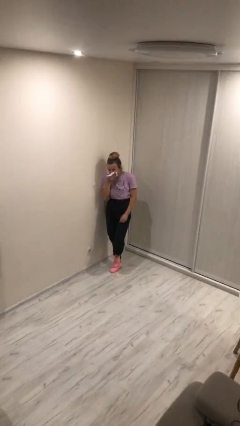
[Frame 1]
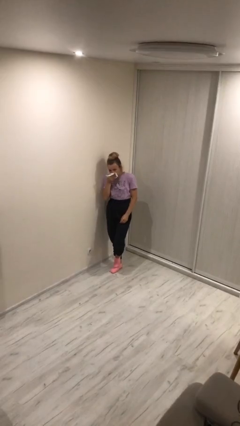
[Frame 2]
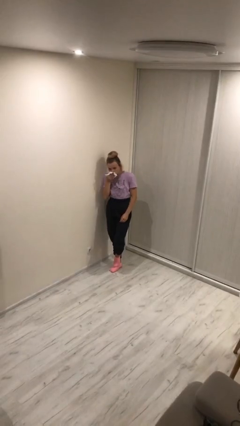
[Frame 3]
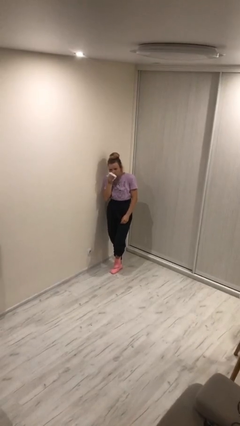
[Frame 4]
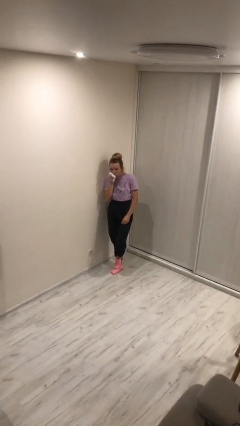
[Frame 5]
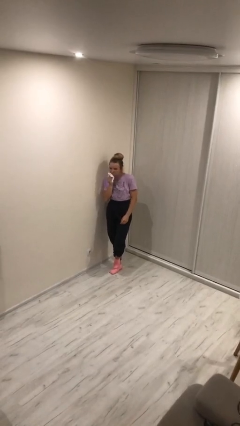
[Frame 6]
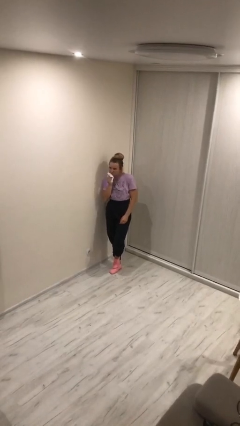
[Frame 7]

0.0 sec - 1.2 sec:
person wipes mouth with napkin

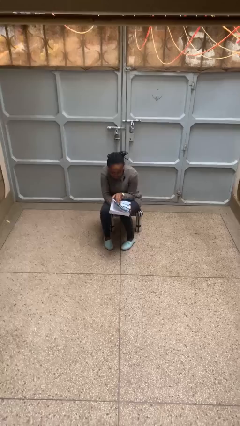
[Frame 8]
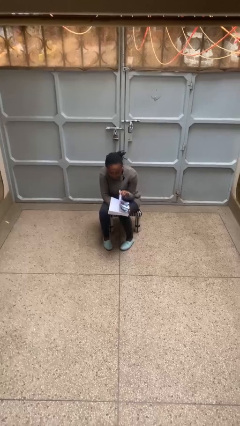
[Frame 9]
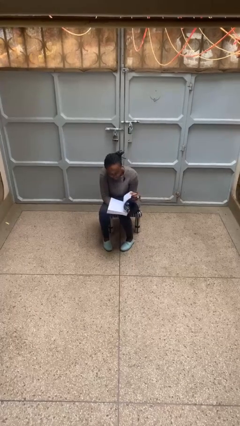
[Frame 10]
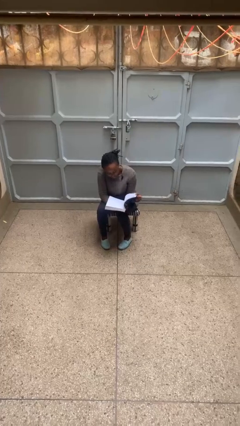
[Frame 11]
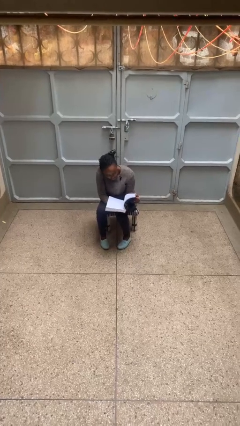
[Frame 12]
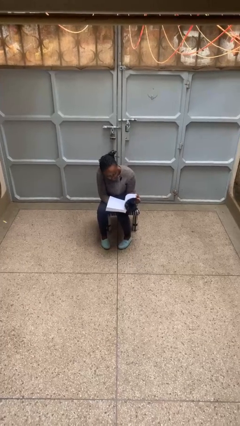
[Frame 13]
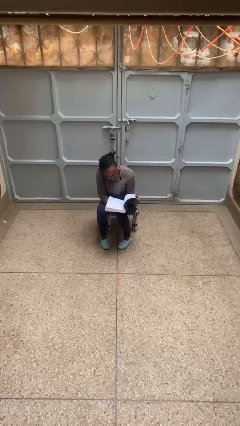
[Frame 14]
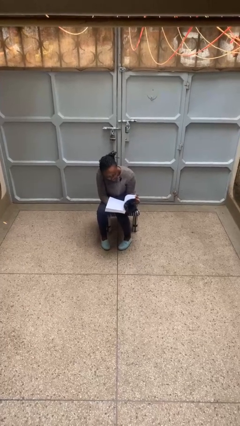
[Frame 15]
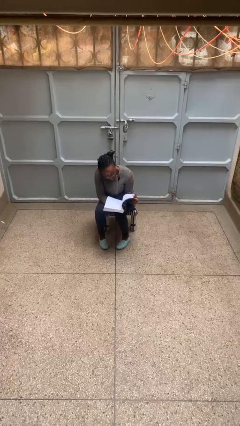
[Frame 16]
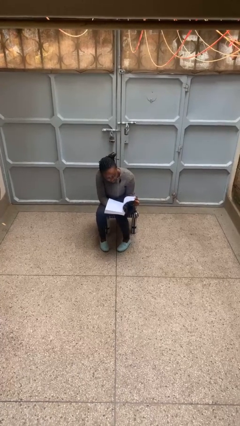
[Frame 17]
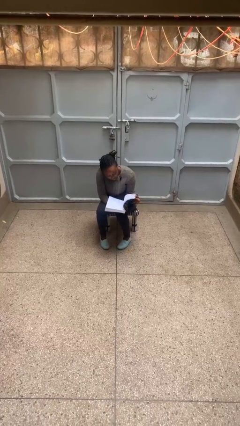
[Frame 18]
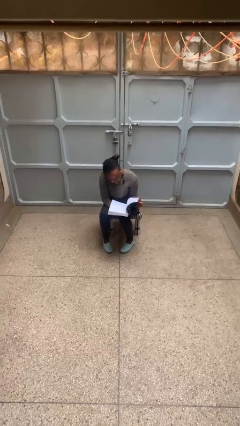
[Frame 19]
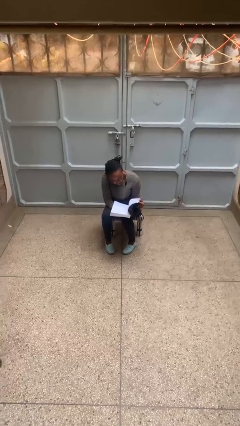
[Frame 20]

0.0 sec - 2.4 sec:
person reads book

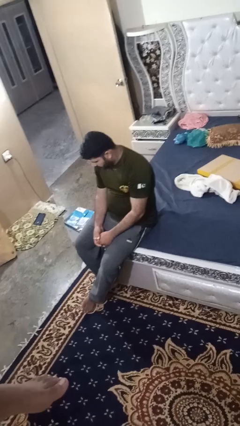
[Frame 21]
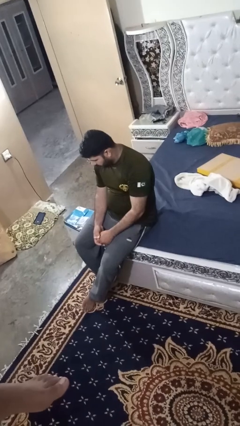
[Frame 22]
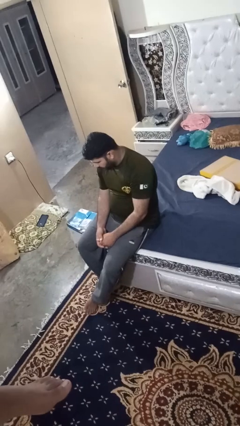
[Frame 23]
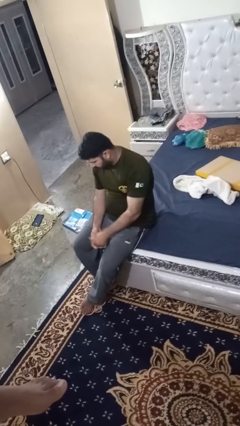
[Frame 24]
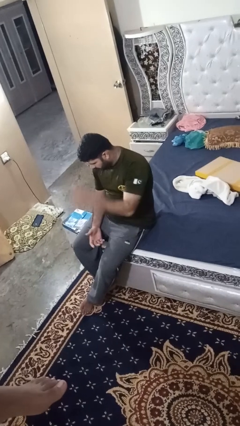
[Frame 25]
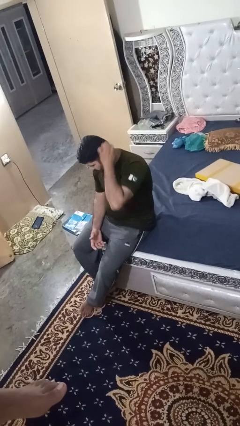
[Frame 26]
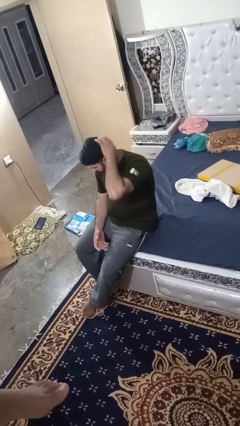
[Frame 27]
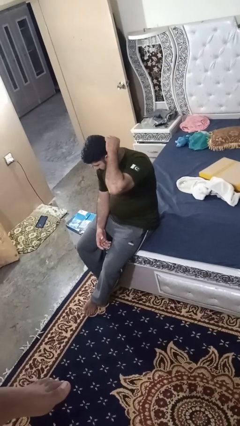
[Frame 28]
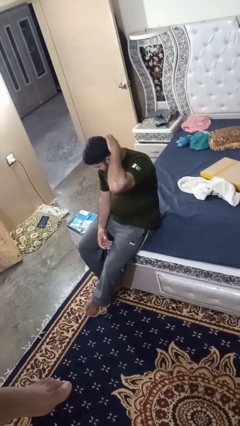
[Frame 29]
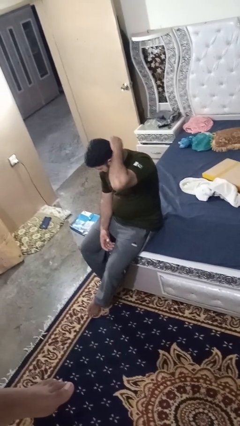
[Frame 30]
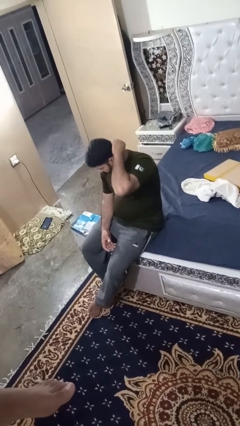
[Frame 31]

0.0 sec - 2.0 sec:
person strokes hair

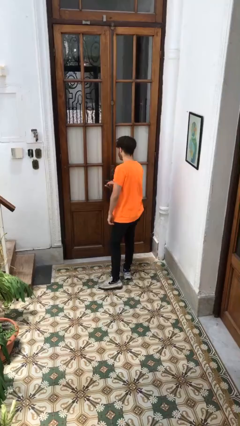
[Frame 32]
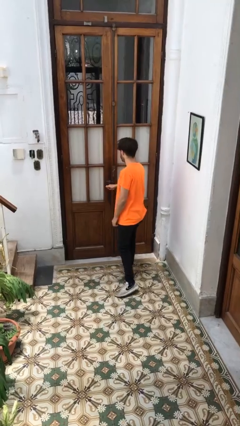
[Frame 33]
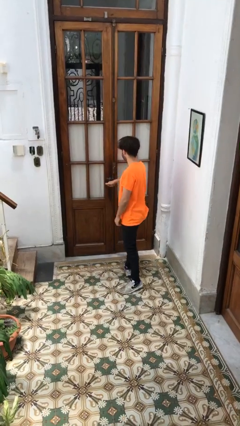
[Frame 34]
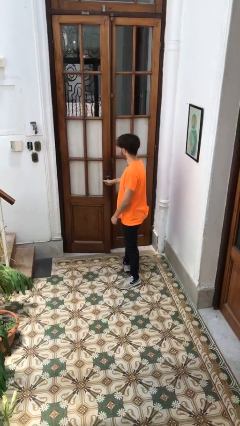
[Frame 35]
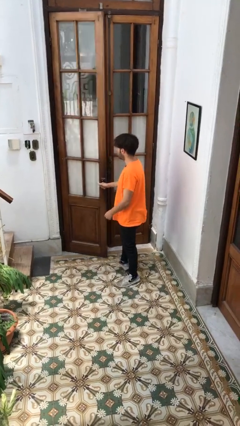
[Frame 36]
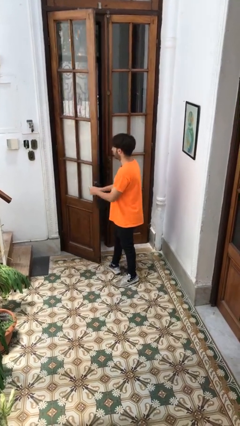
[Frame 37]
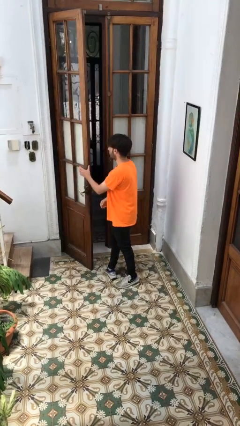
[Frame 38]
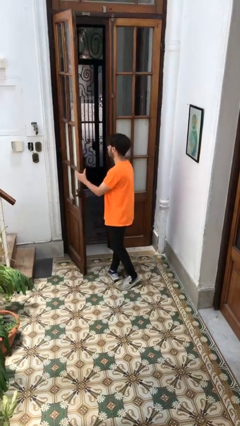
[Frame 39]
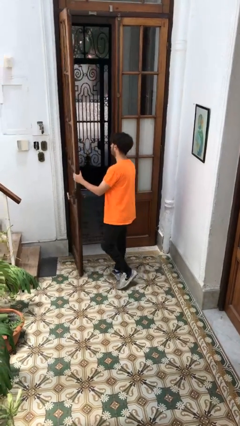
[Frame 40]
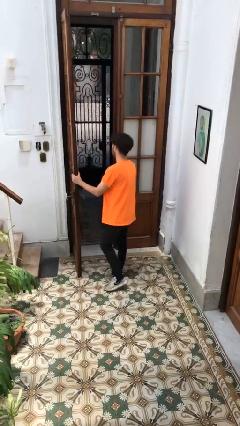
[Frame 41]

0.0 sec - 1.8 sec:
person opens facility door

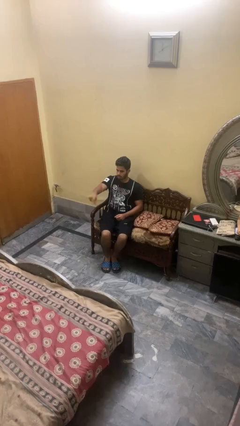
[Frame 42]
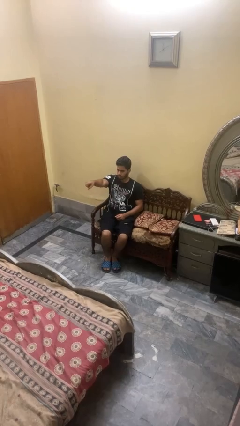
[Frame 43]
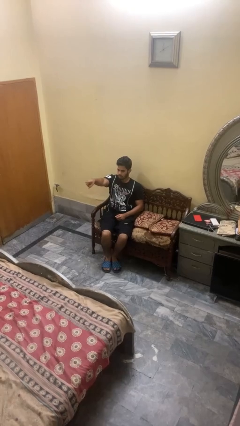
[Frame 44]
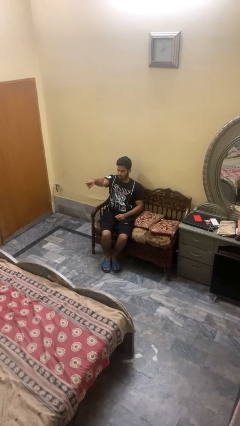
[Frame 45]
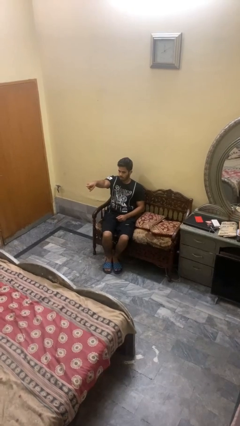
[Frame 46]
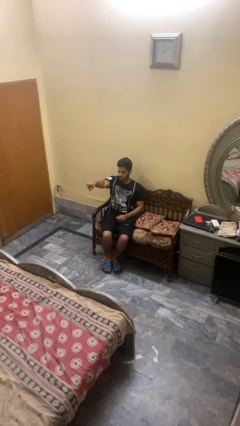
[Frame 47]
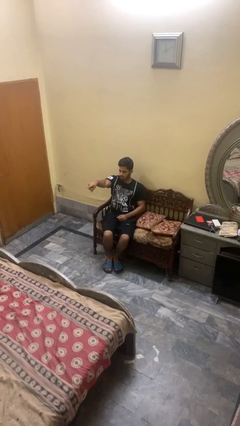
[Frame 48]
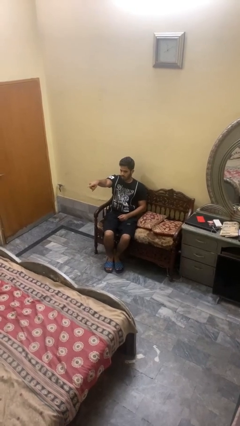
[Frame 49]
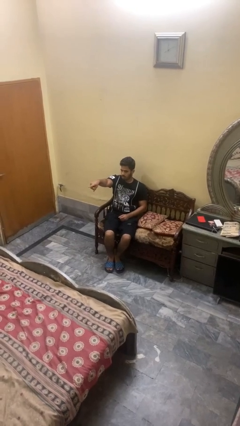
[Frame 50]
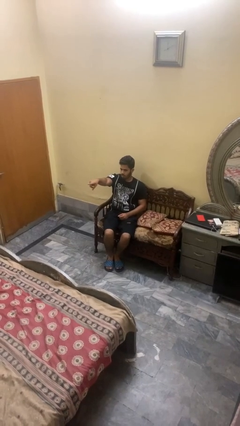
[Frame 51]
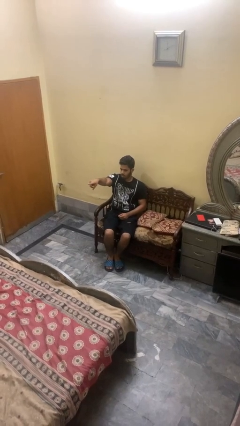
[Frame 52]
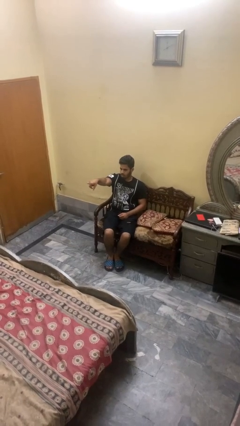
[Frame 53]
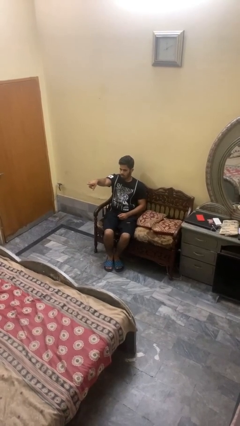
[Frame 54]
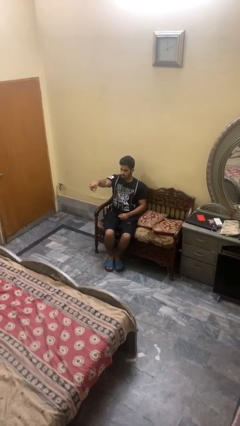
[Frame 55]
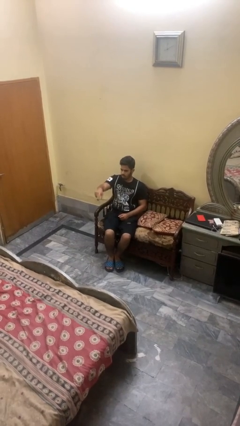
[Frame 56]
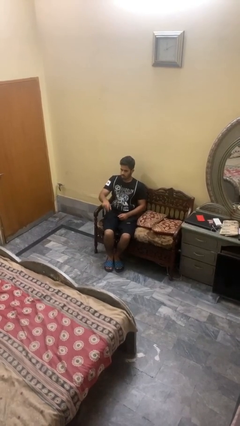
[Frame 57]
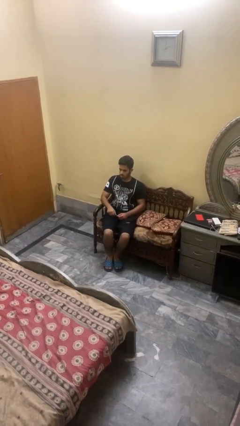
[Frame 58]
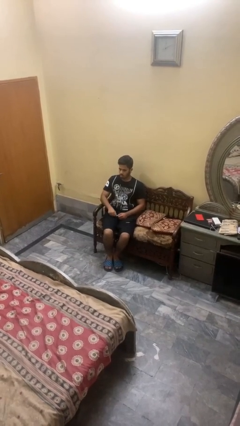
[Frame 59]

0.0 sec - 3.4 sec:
person points at person

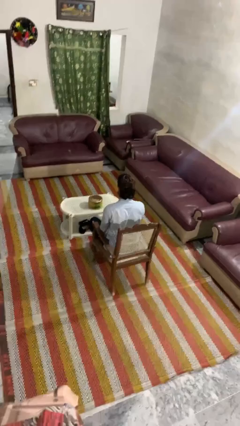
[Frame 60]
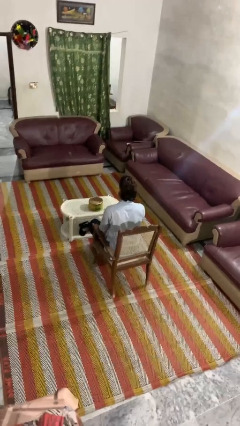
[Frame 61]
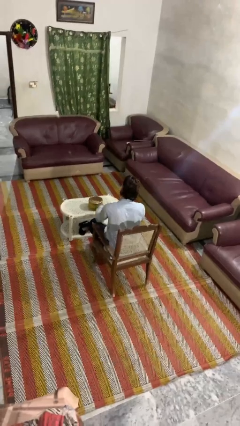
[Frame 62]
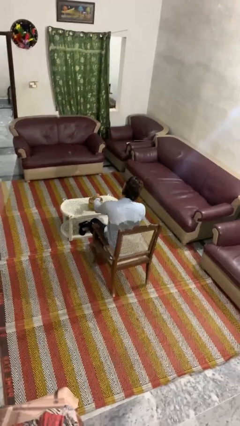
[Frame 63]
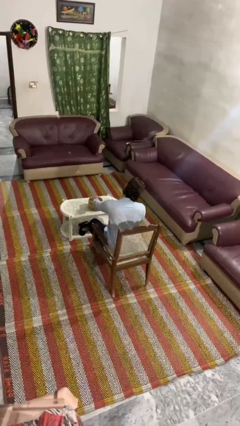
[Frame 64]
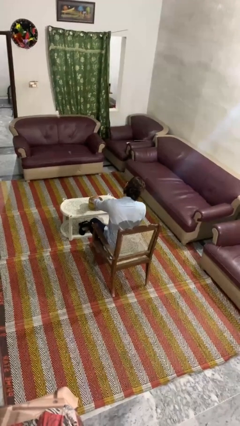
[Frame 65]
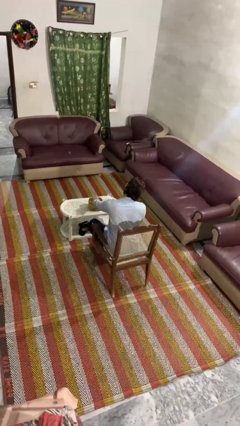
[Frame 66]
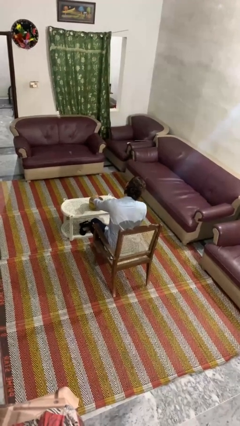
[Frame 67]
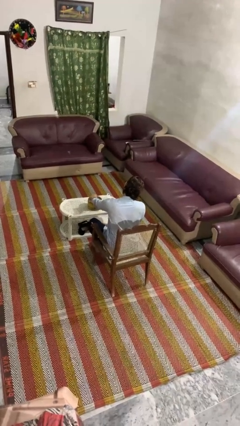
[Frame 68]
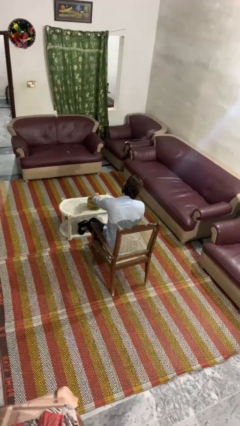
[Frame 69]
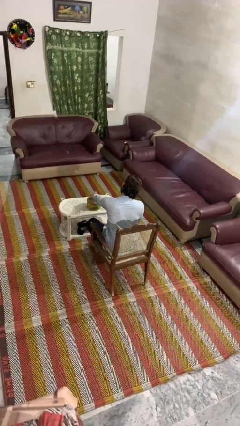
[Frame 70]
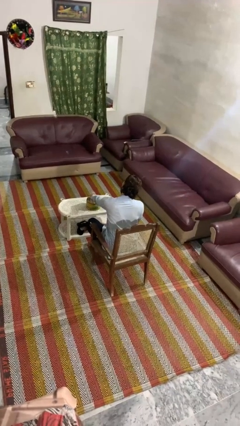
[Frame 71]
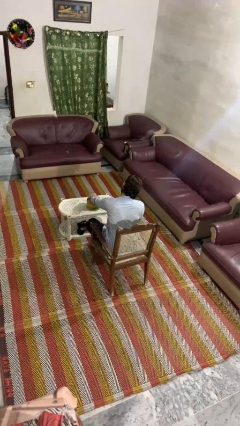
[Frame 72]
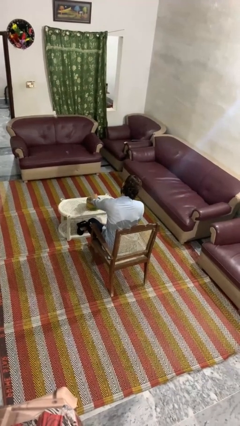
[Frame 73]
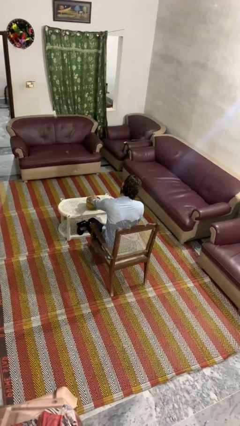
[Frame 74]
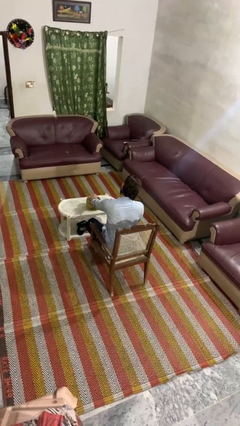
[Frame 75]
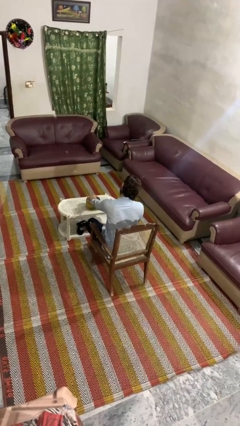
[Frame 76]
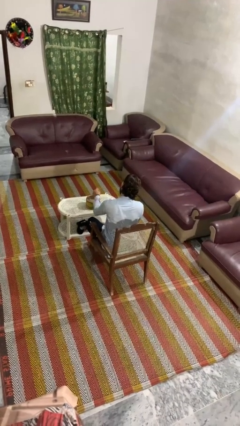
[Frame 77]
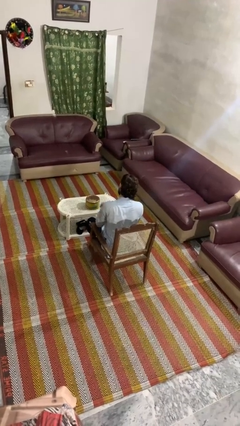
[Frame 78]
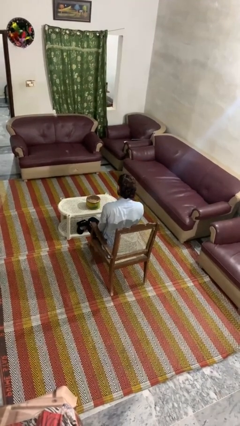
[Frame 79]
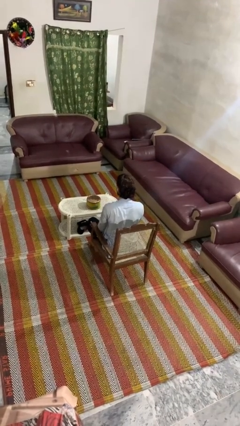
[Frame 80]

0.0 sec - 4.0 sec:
person taps object with finger

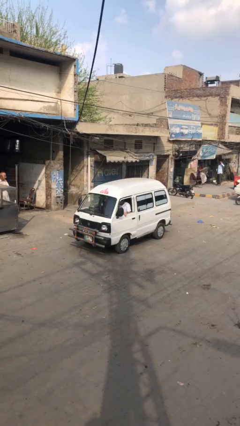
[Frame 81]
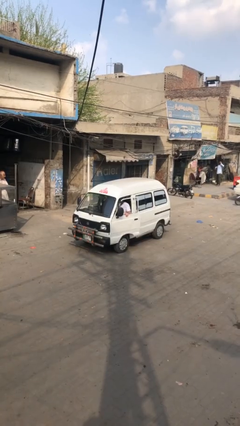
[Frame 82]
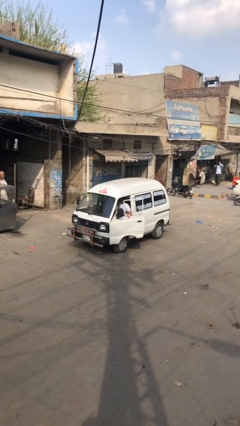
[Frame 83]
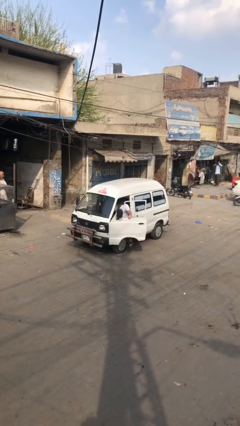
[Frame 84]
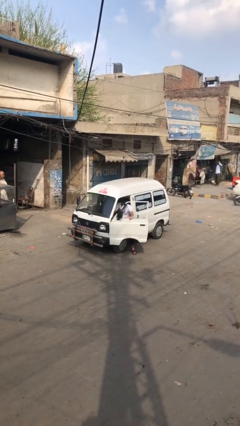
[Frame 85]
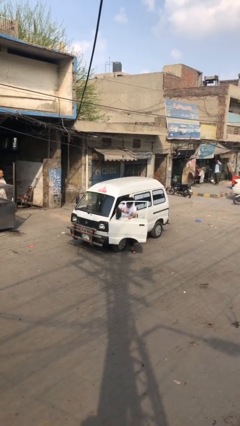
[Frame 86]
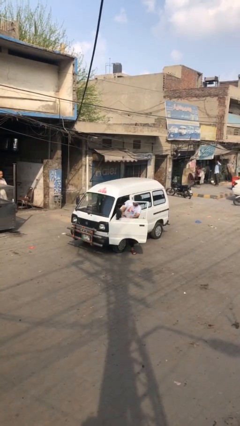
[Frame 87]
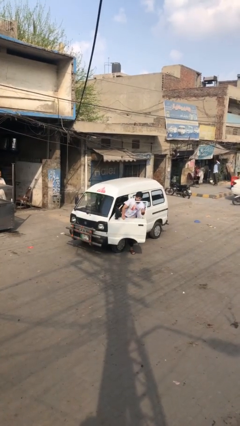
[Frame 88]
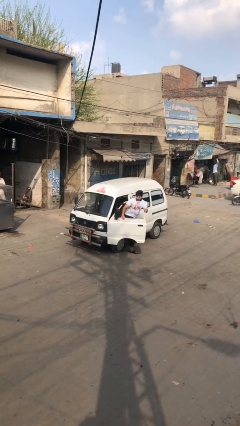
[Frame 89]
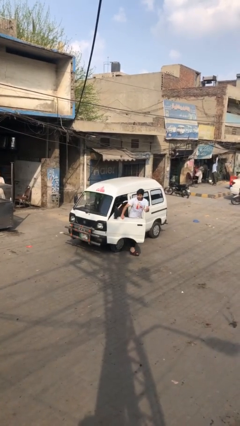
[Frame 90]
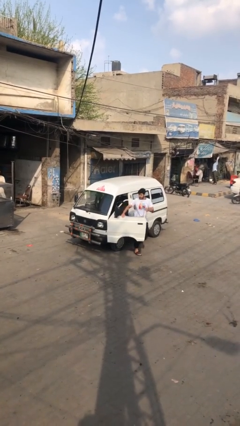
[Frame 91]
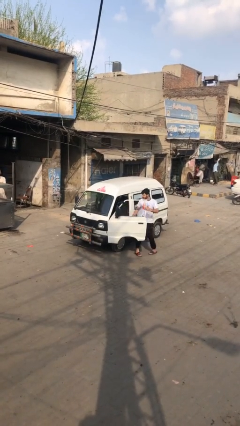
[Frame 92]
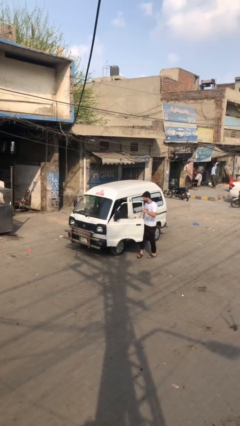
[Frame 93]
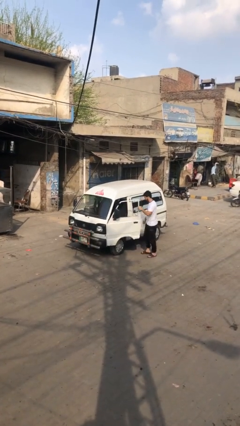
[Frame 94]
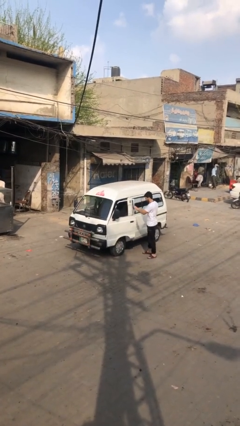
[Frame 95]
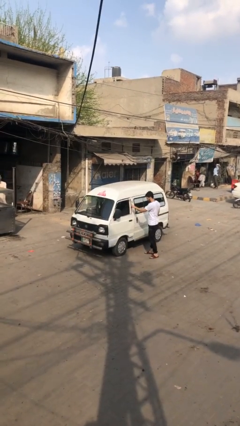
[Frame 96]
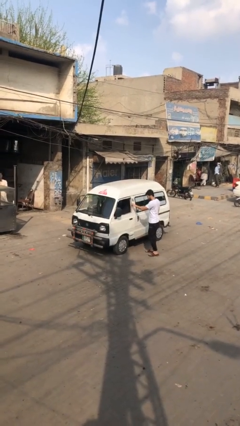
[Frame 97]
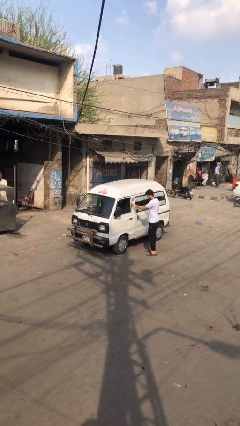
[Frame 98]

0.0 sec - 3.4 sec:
car drops off person
